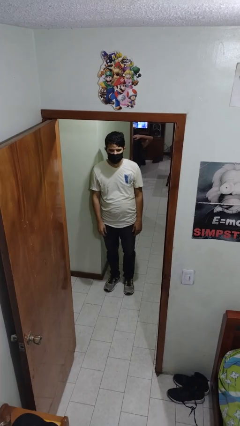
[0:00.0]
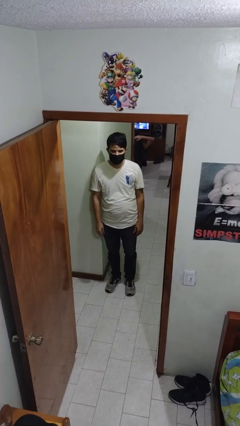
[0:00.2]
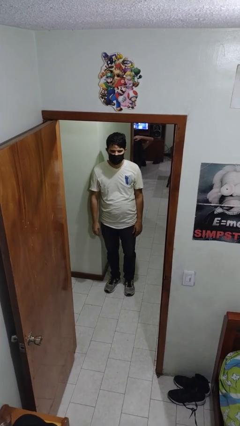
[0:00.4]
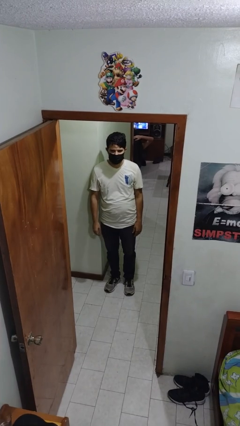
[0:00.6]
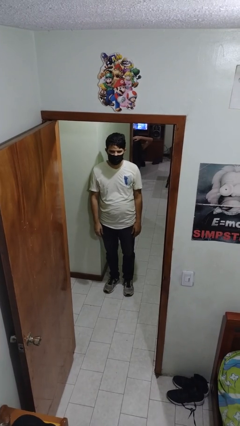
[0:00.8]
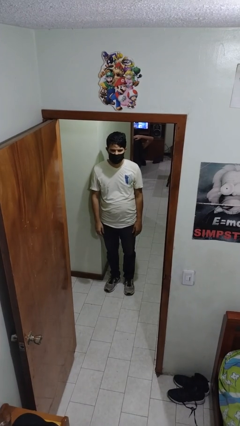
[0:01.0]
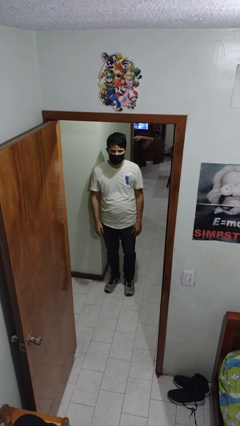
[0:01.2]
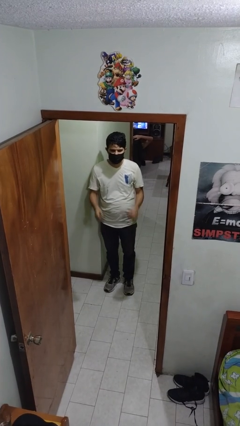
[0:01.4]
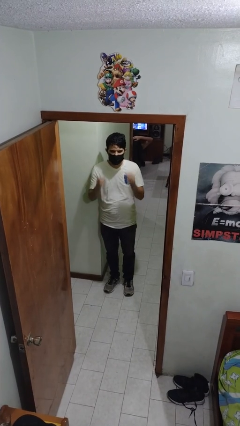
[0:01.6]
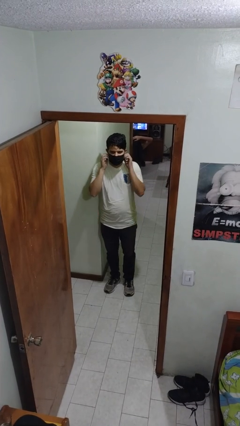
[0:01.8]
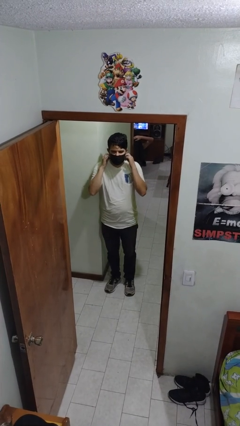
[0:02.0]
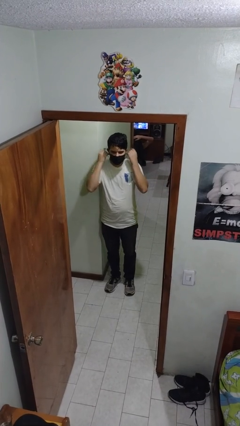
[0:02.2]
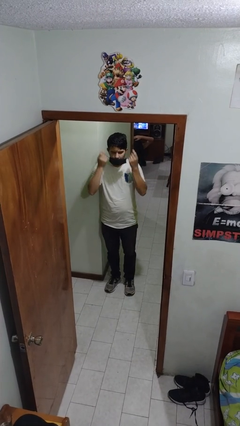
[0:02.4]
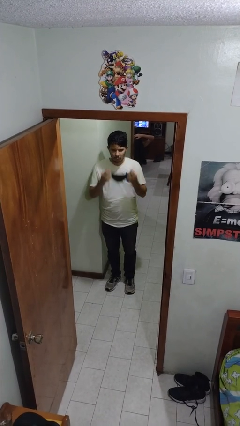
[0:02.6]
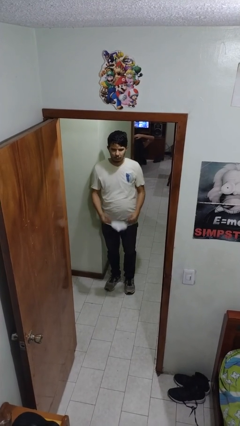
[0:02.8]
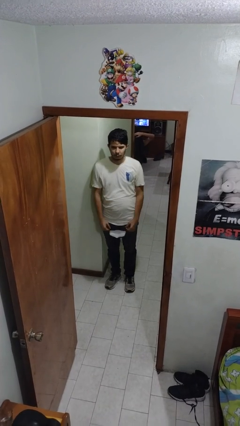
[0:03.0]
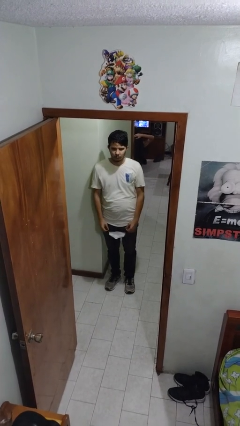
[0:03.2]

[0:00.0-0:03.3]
person takes off facemask

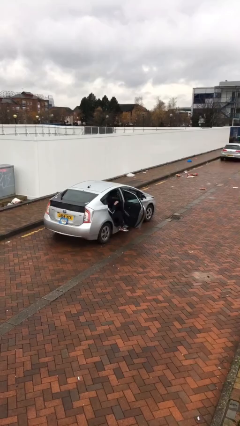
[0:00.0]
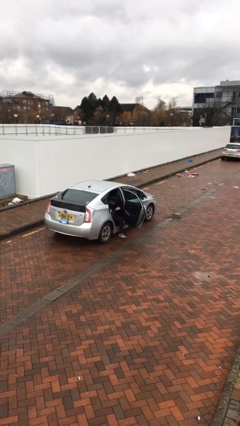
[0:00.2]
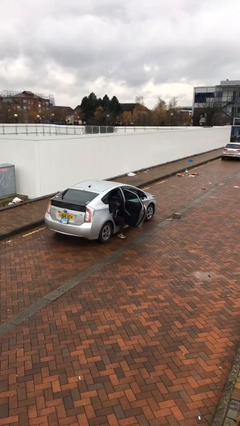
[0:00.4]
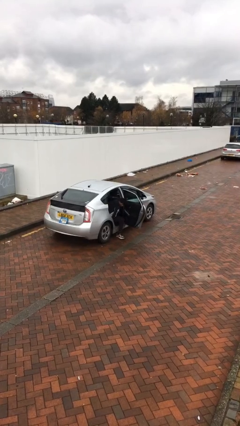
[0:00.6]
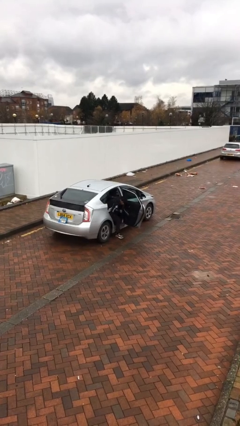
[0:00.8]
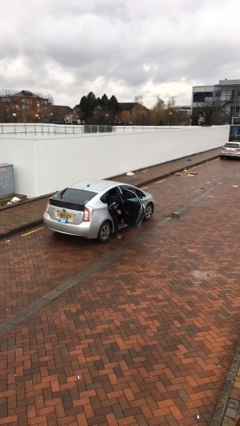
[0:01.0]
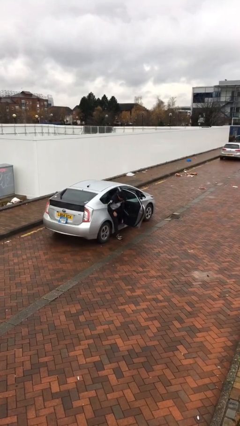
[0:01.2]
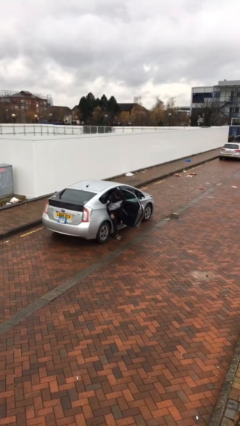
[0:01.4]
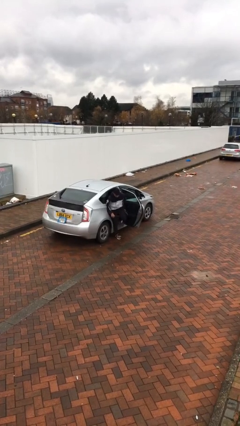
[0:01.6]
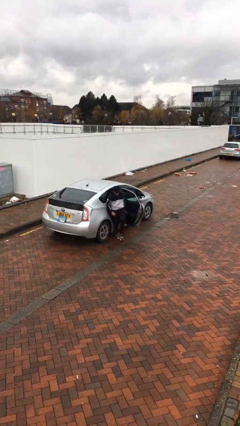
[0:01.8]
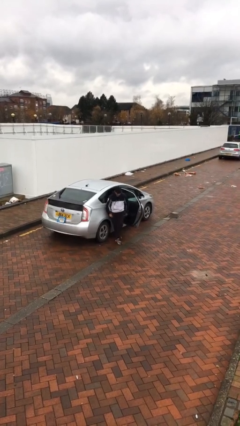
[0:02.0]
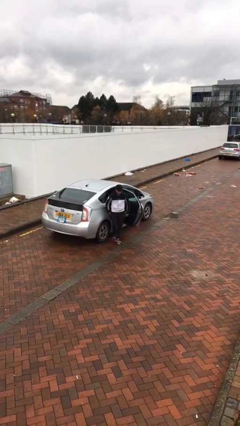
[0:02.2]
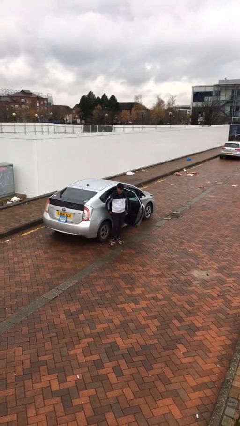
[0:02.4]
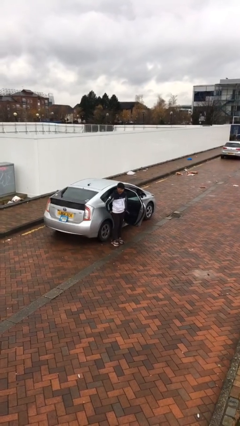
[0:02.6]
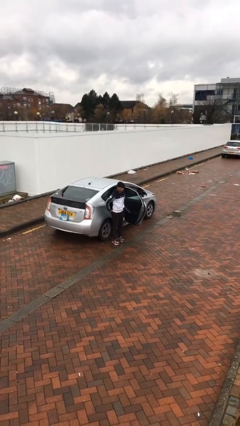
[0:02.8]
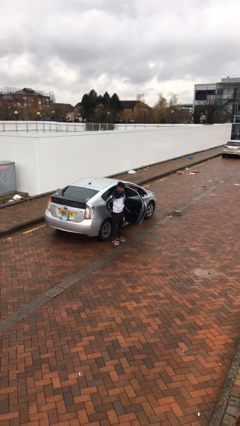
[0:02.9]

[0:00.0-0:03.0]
person exits car

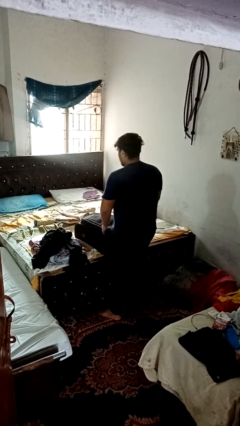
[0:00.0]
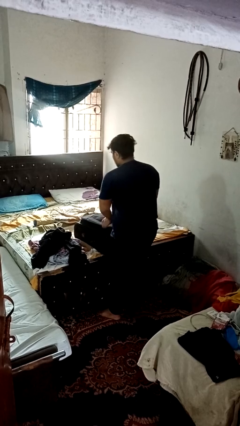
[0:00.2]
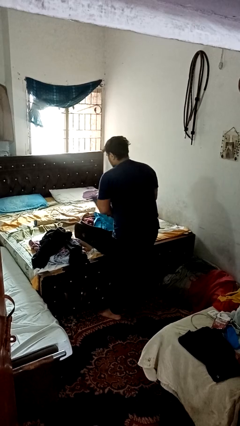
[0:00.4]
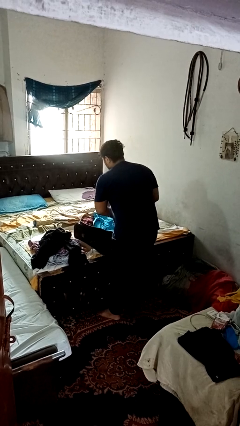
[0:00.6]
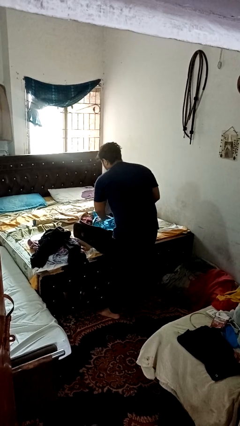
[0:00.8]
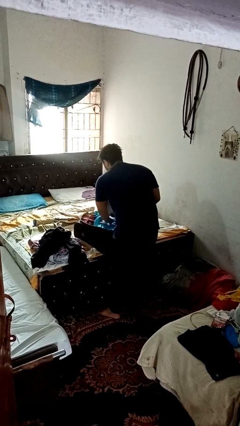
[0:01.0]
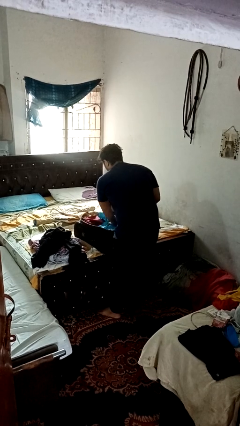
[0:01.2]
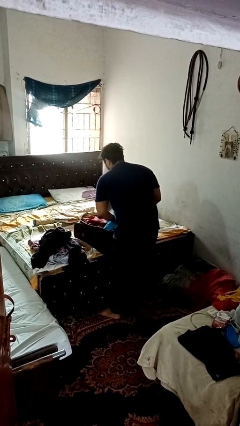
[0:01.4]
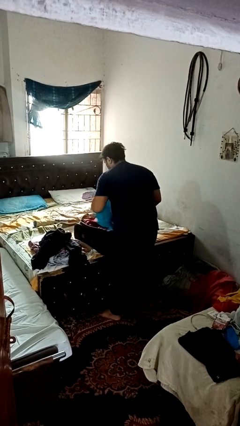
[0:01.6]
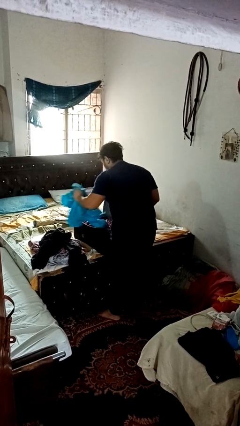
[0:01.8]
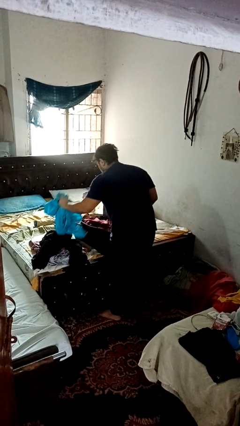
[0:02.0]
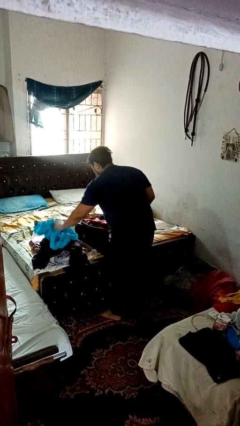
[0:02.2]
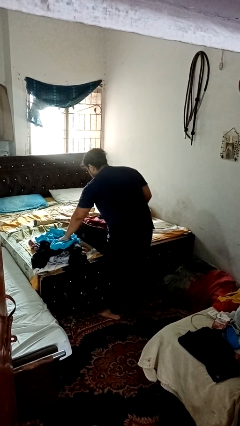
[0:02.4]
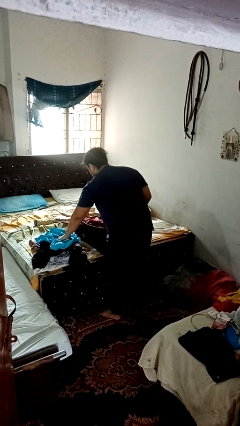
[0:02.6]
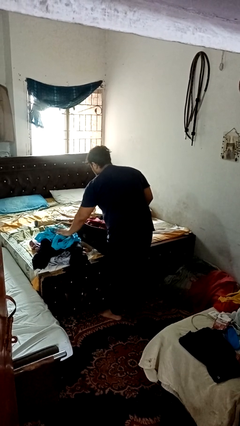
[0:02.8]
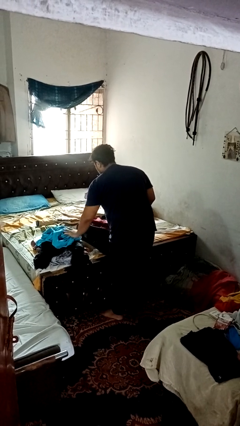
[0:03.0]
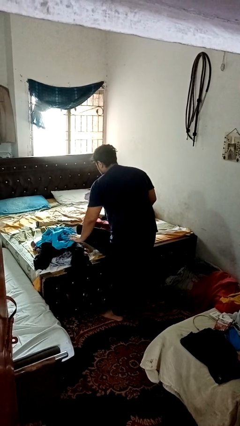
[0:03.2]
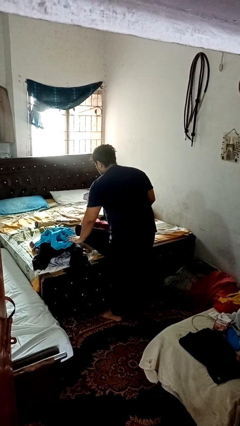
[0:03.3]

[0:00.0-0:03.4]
person unloads clothes from suitcase

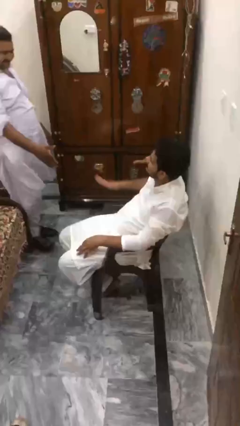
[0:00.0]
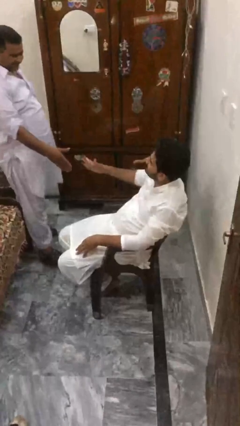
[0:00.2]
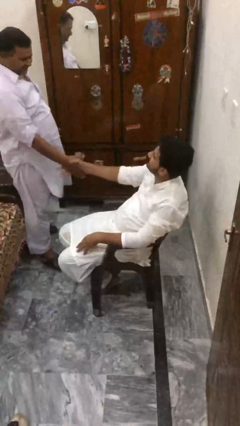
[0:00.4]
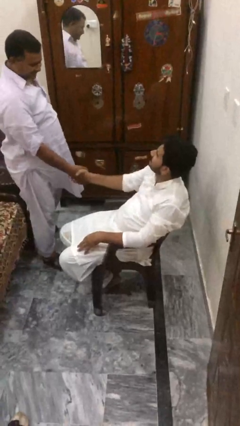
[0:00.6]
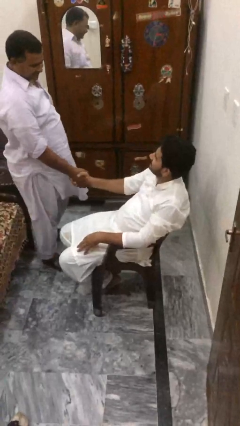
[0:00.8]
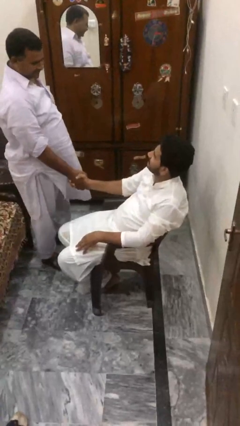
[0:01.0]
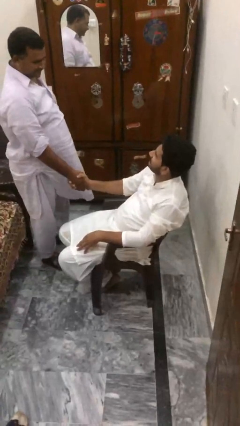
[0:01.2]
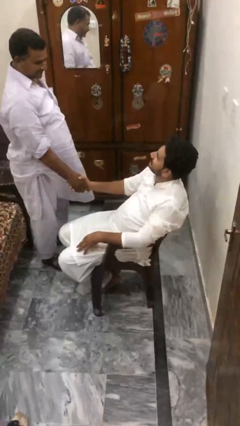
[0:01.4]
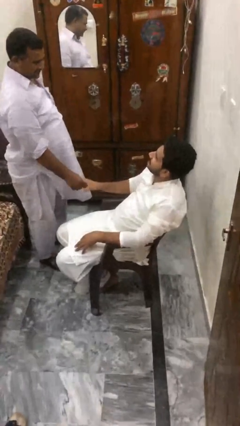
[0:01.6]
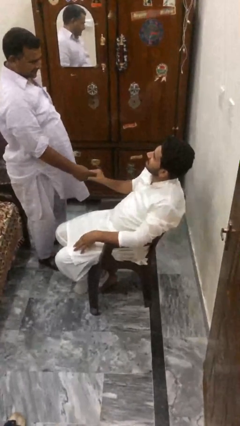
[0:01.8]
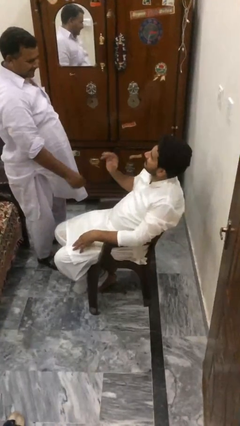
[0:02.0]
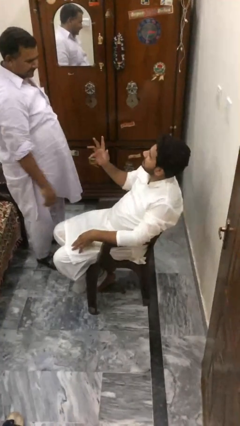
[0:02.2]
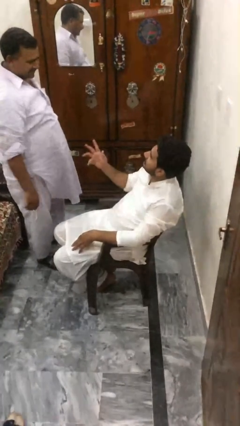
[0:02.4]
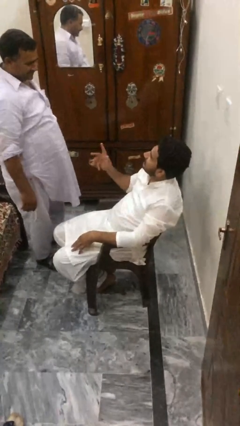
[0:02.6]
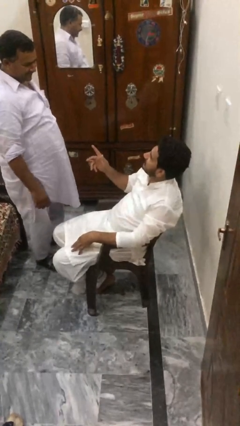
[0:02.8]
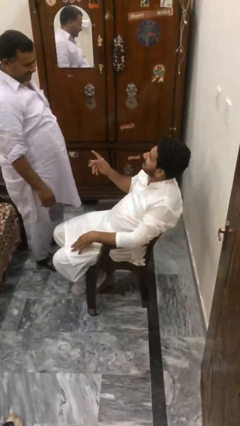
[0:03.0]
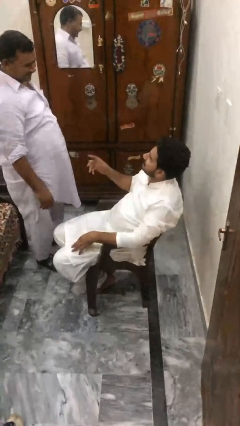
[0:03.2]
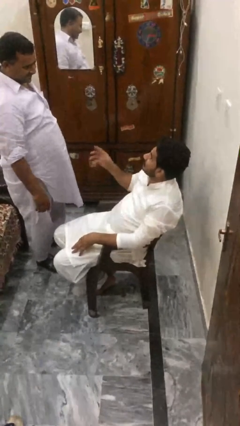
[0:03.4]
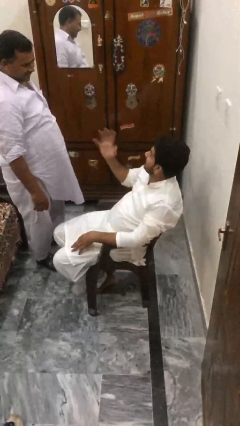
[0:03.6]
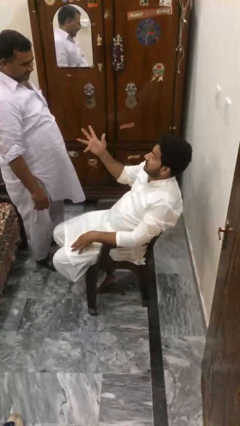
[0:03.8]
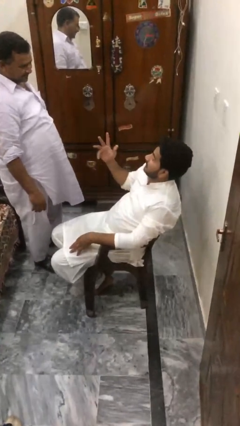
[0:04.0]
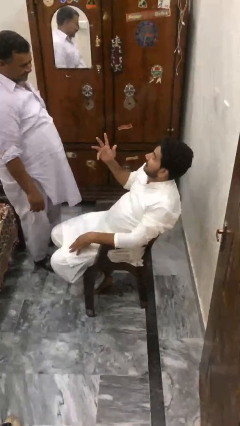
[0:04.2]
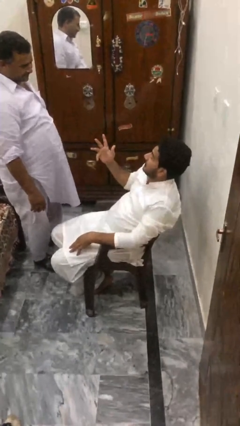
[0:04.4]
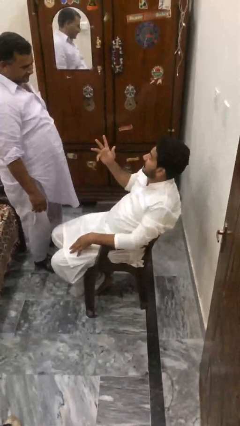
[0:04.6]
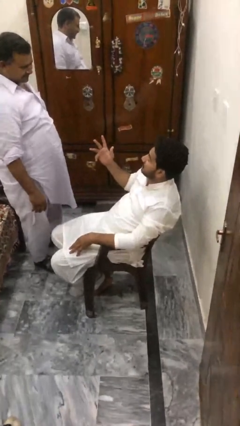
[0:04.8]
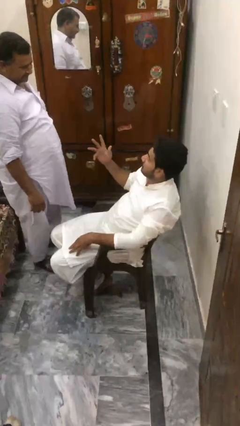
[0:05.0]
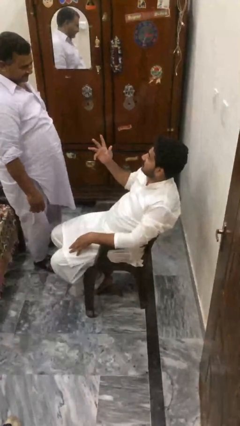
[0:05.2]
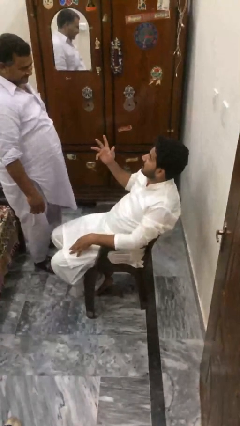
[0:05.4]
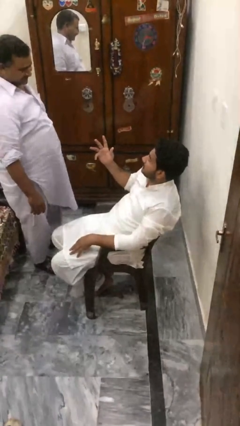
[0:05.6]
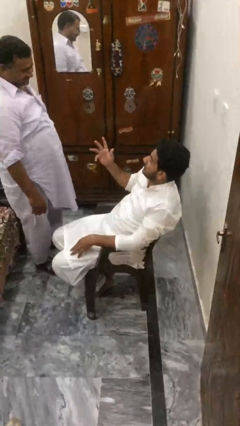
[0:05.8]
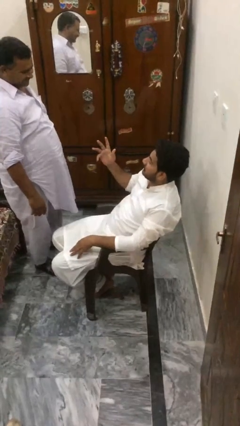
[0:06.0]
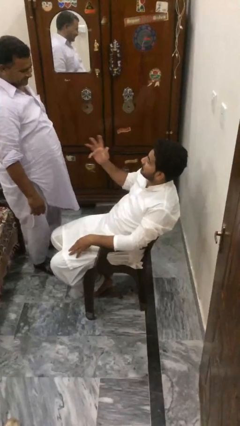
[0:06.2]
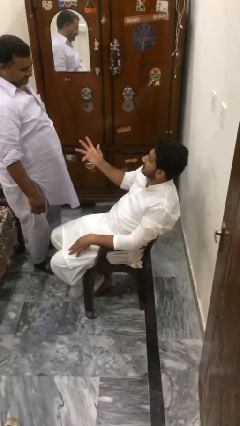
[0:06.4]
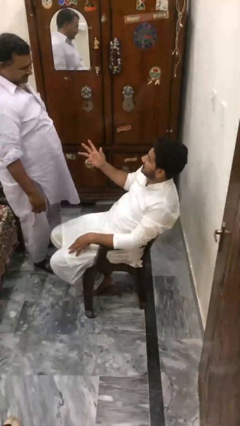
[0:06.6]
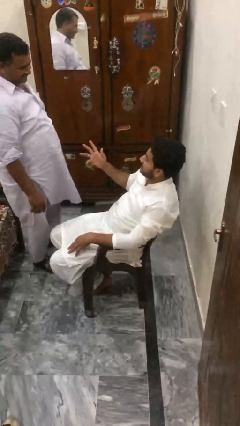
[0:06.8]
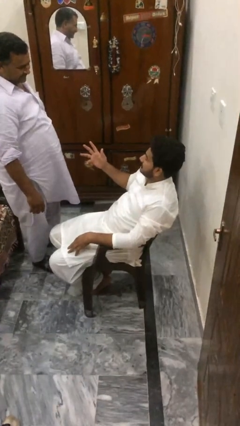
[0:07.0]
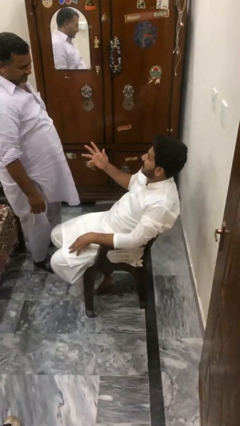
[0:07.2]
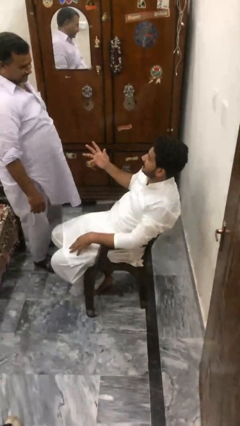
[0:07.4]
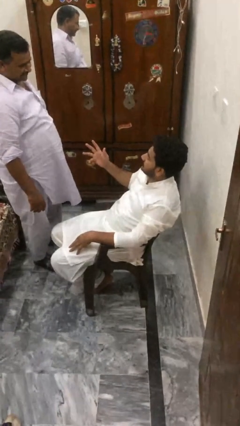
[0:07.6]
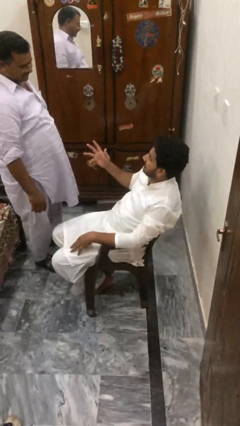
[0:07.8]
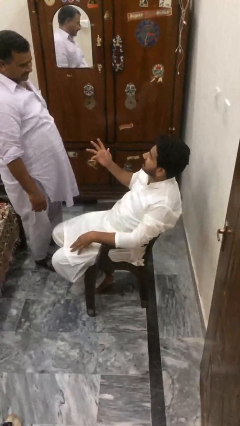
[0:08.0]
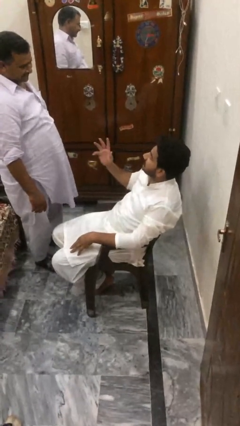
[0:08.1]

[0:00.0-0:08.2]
person shakes hand
